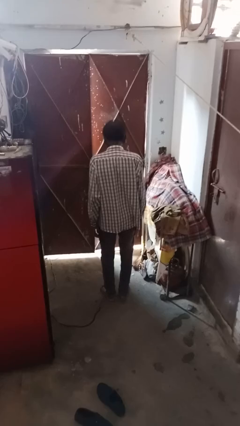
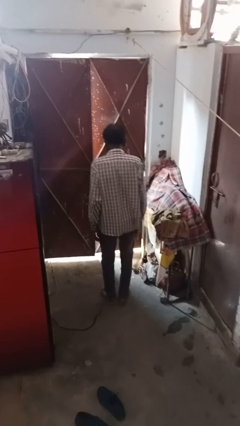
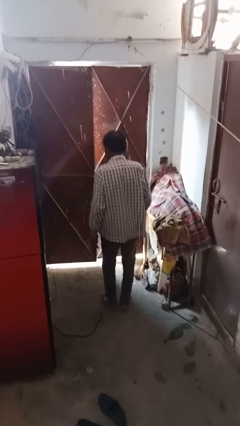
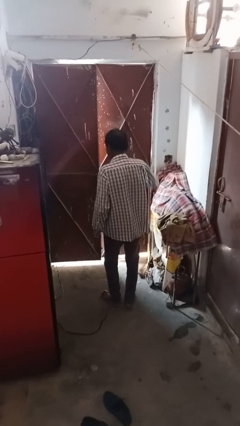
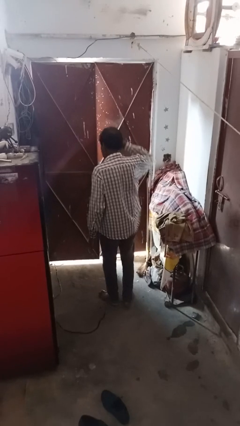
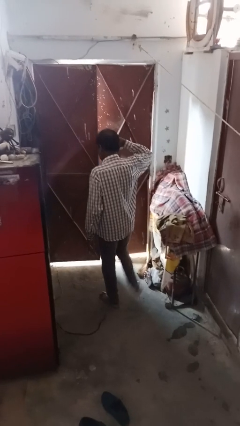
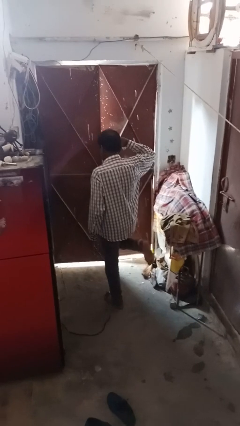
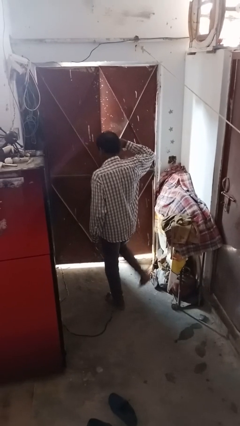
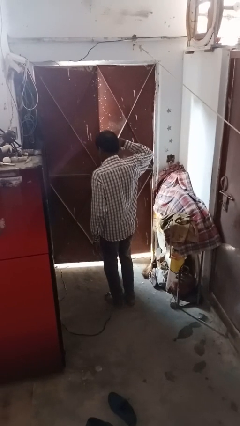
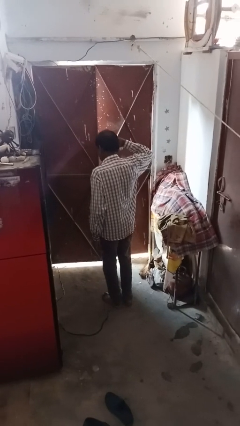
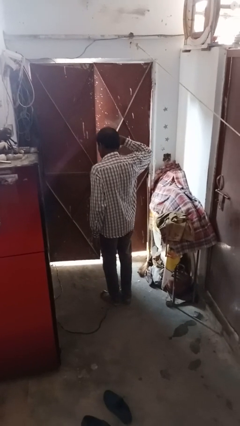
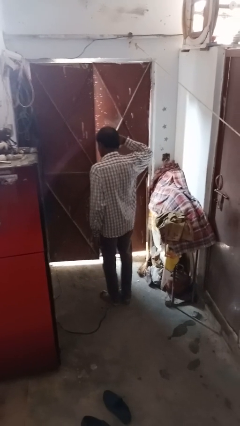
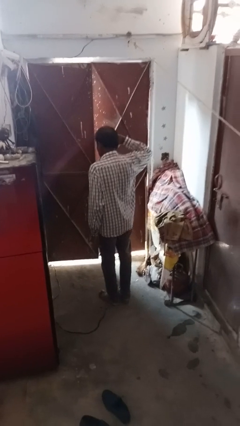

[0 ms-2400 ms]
person salutes

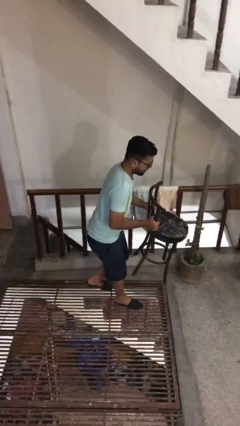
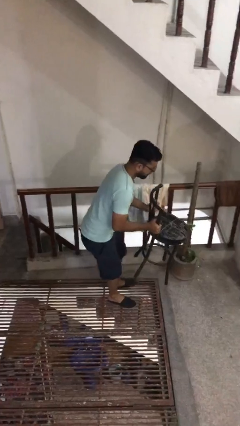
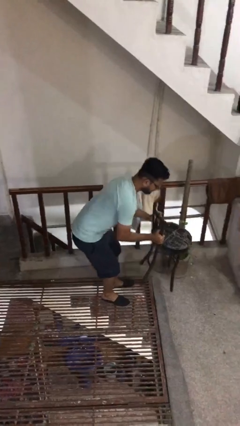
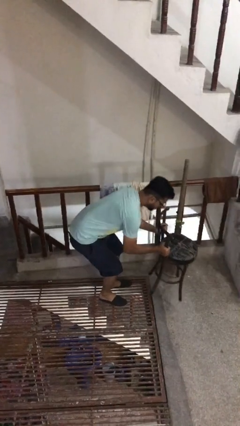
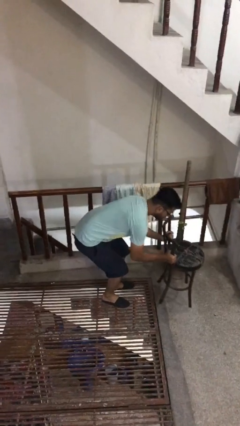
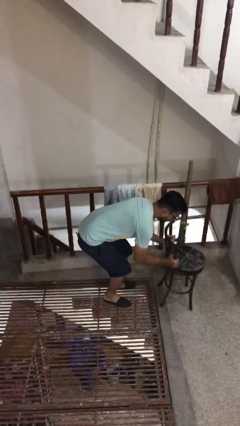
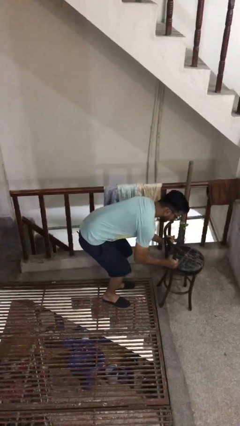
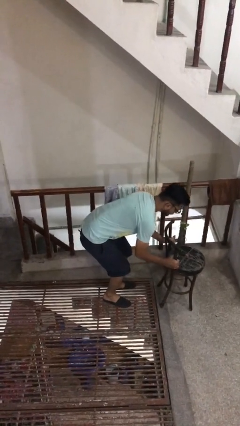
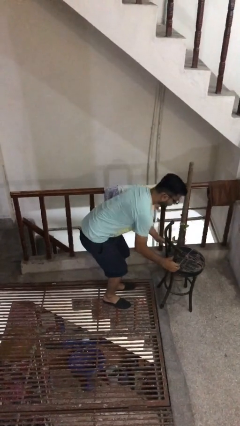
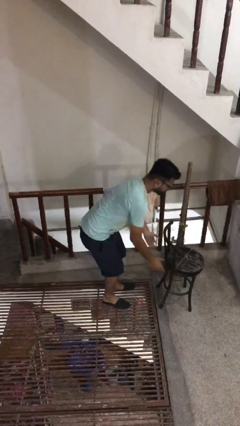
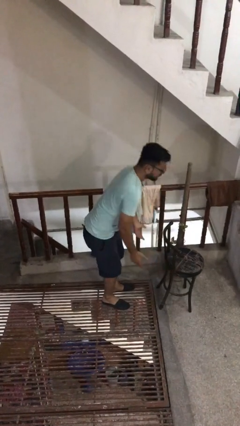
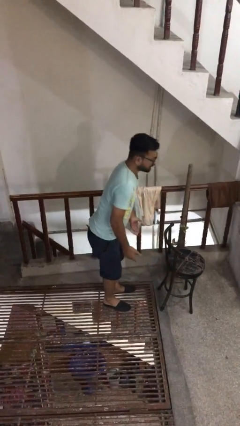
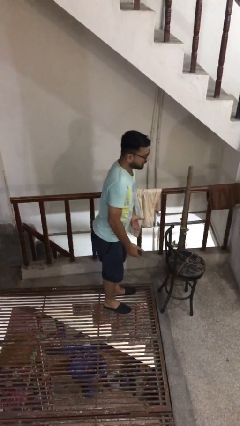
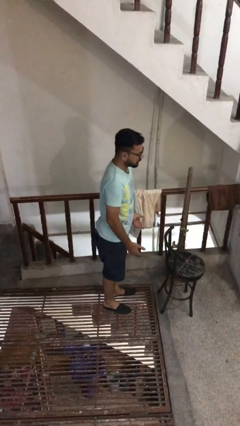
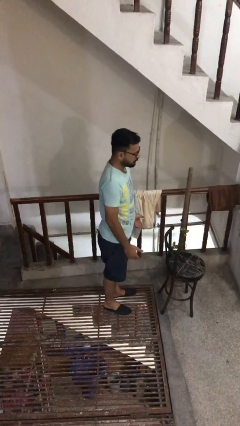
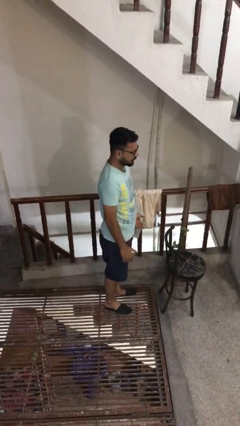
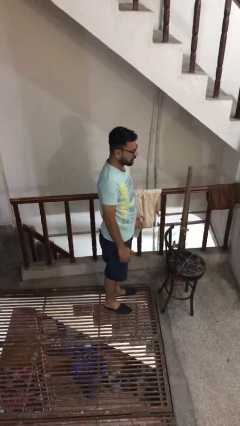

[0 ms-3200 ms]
person puts down object on floor

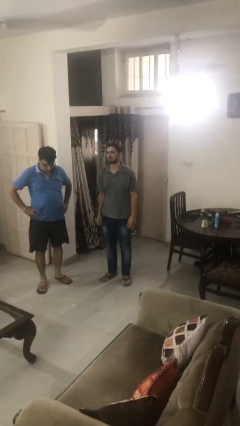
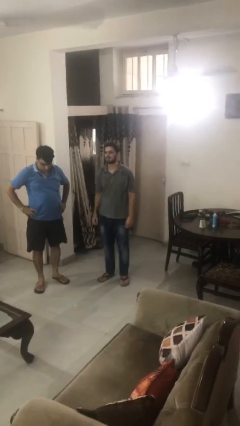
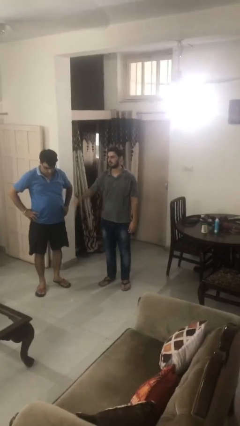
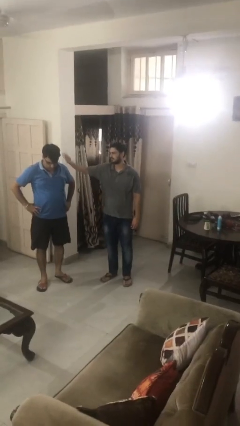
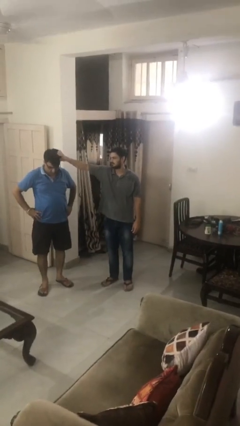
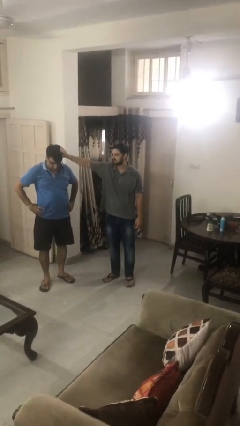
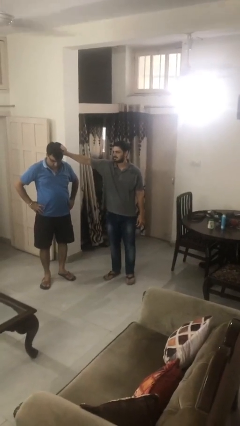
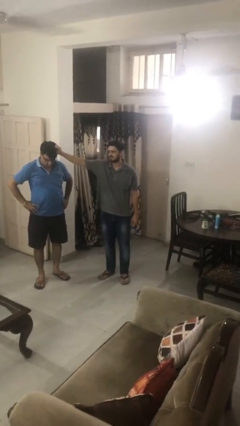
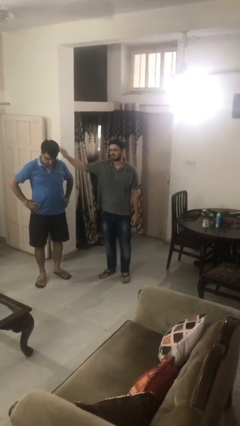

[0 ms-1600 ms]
person grabs person by hair

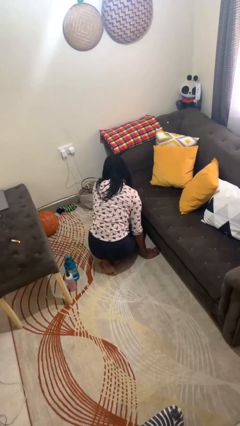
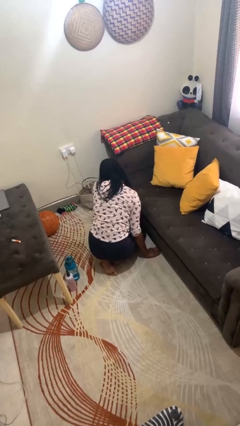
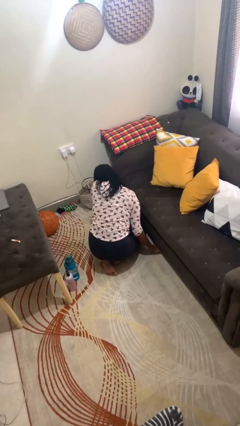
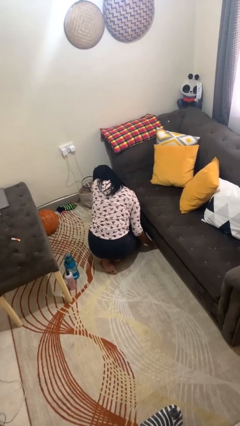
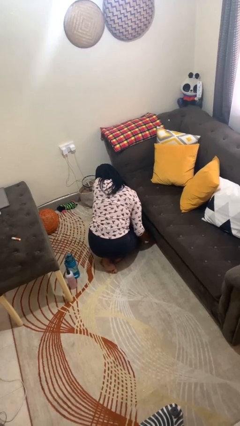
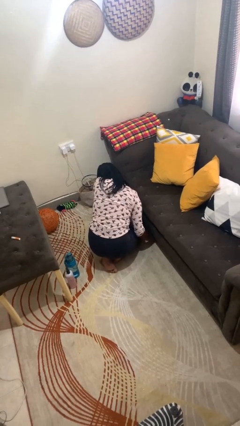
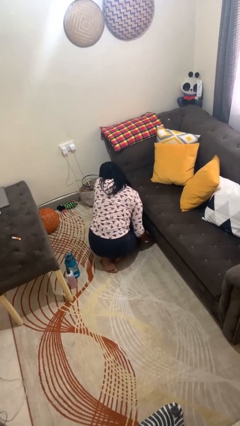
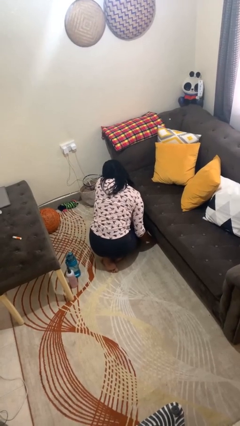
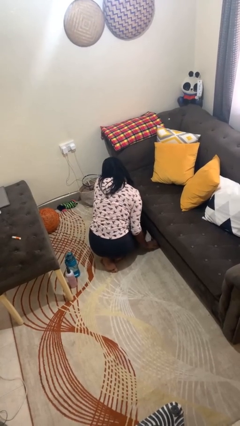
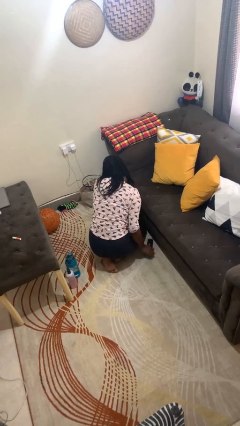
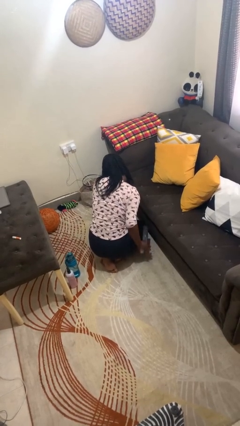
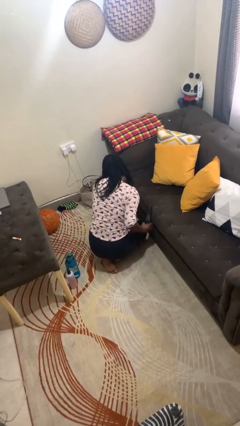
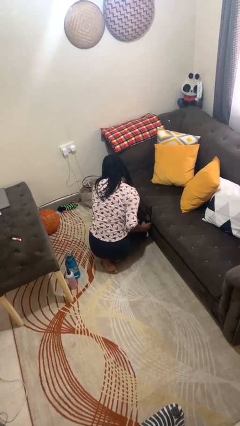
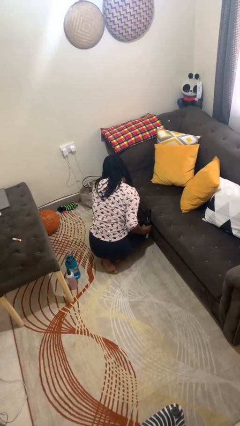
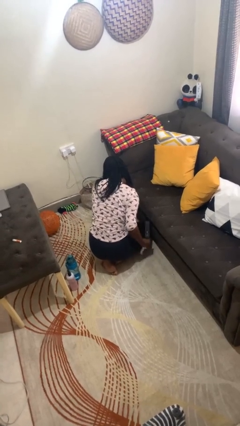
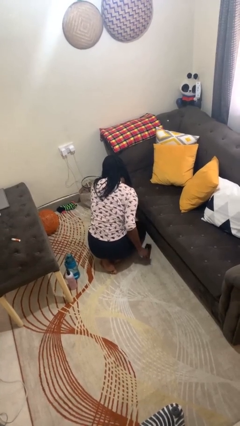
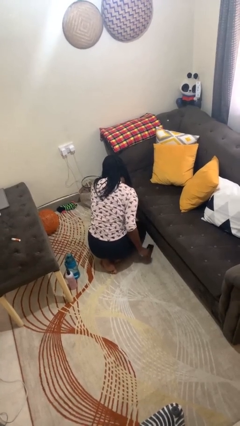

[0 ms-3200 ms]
person searches under couch

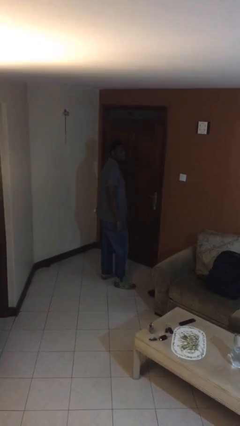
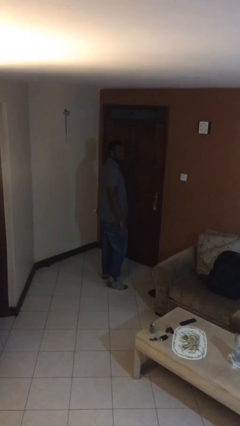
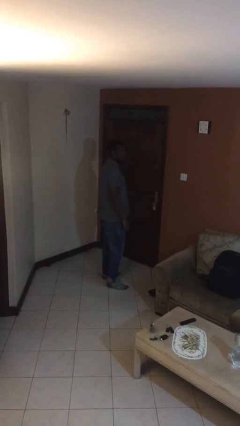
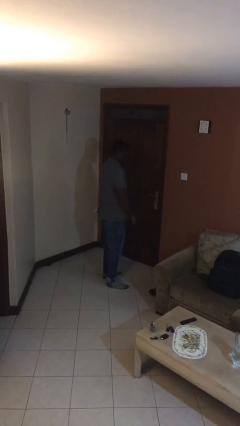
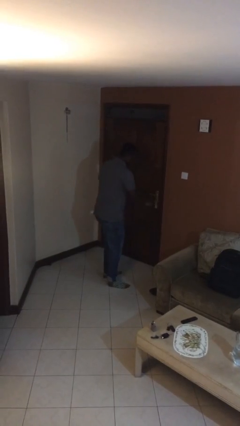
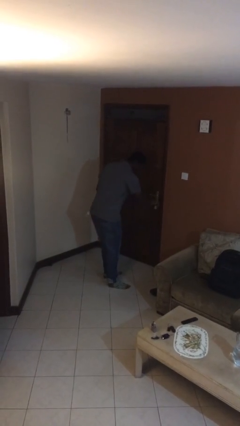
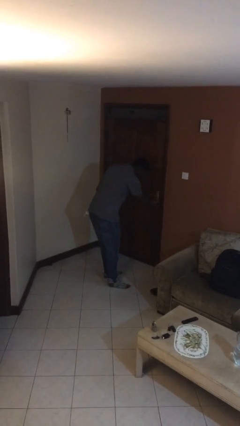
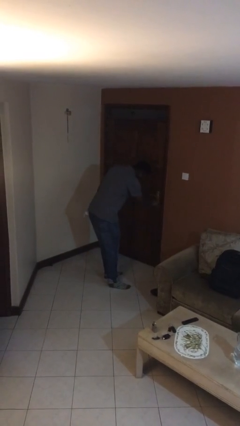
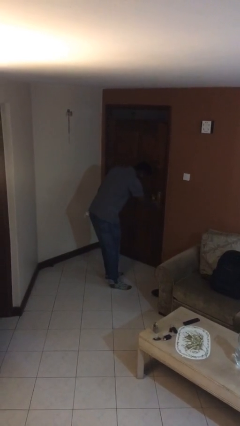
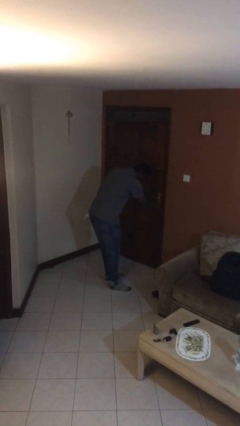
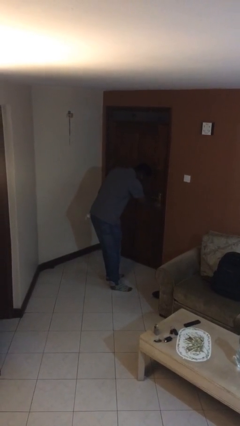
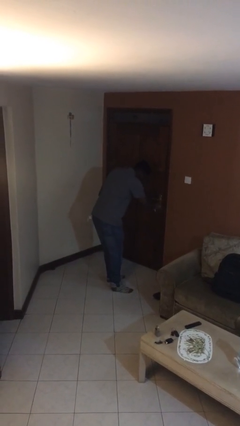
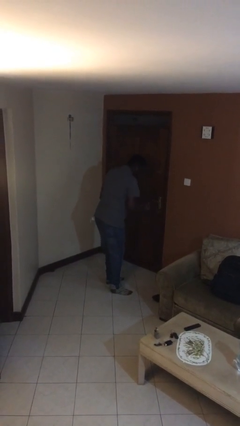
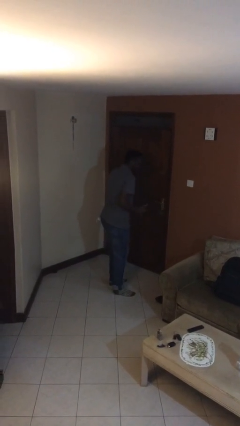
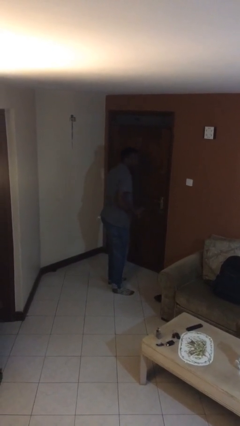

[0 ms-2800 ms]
person locks door with keys

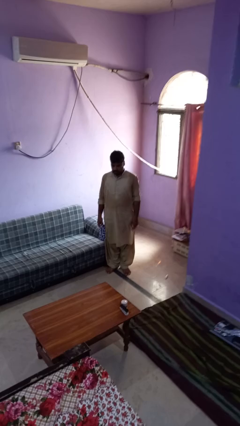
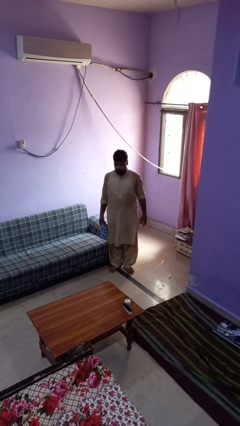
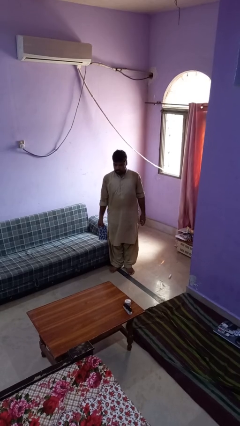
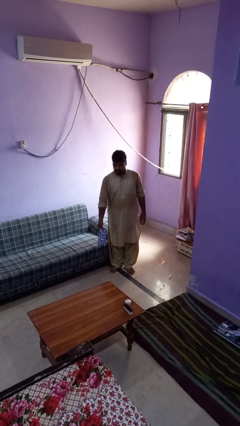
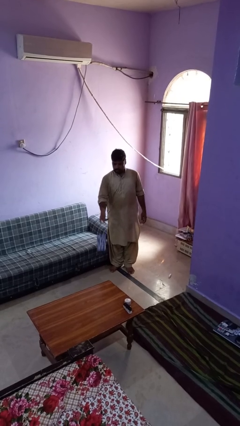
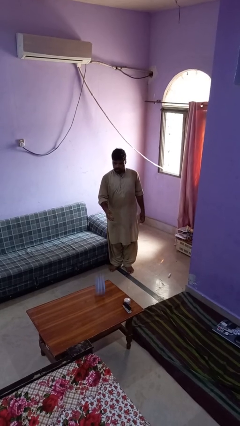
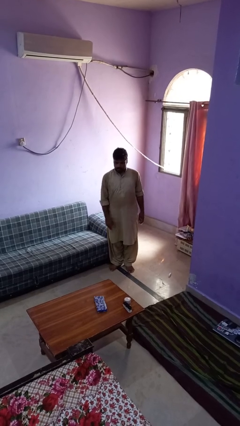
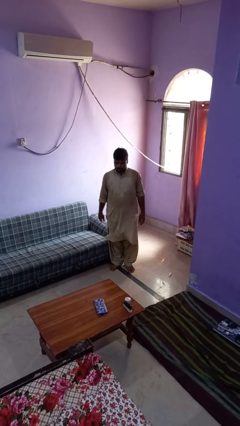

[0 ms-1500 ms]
person throws object on table

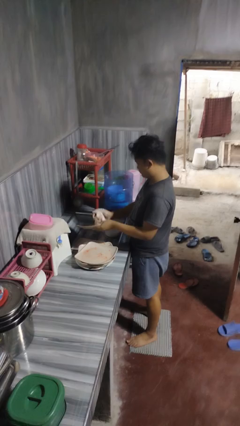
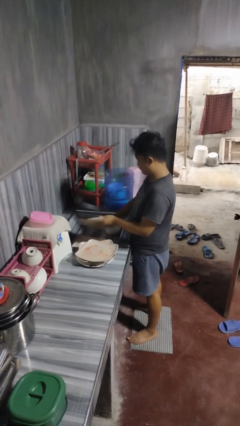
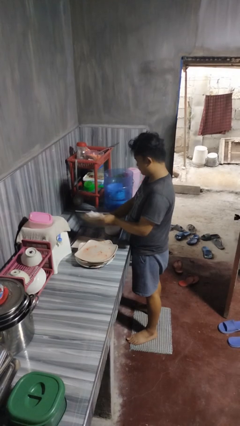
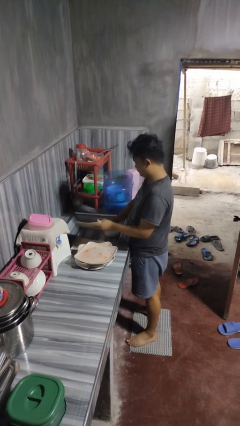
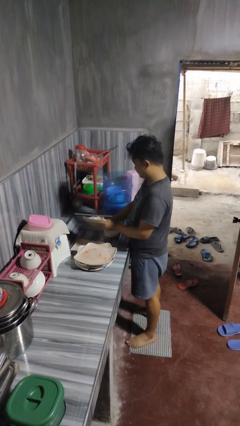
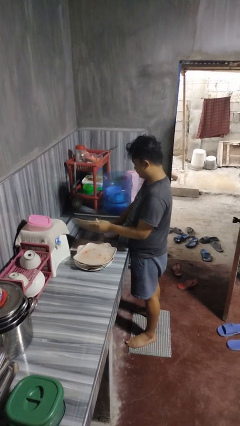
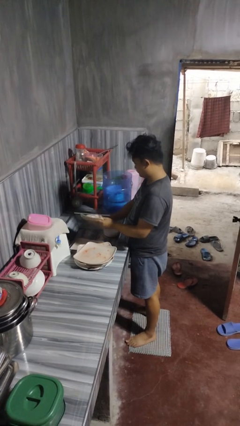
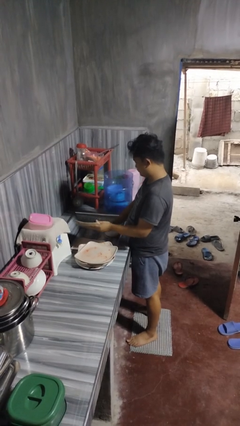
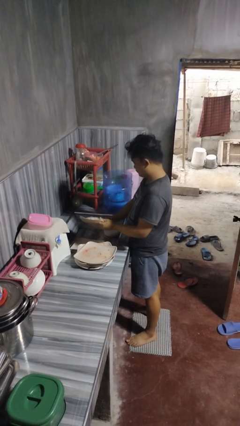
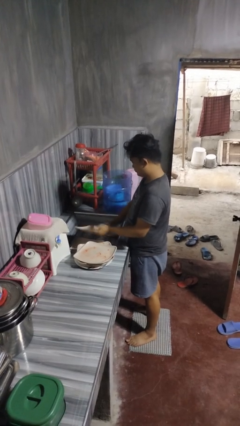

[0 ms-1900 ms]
person washes dish

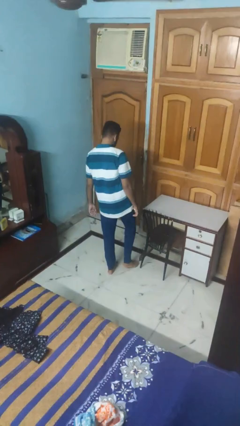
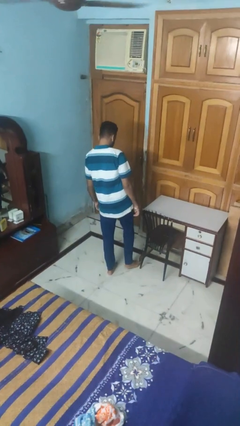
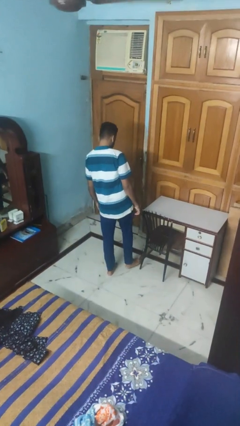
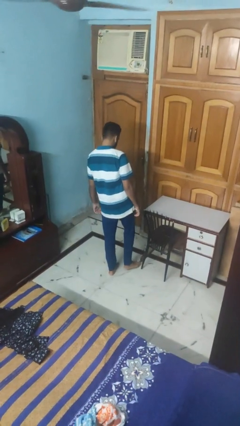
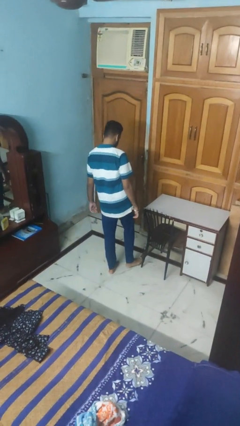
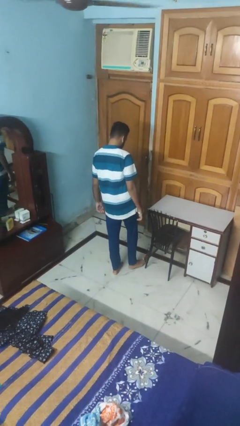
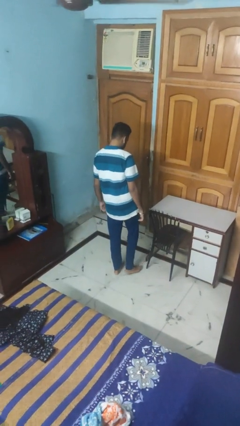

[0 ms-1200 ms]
person stubs toe
